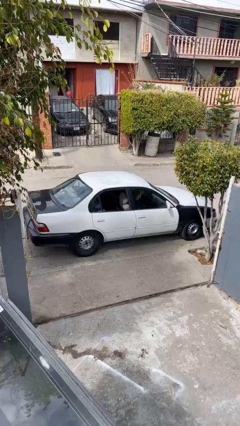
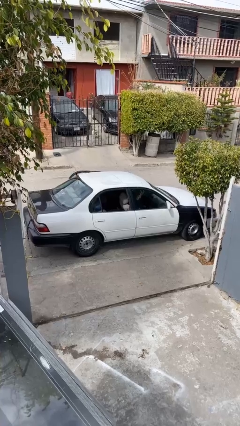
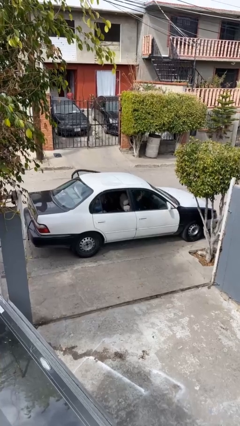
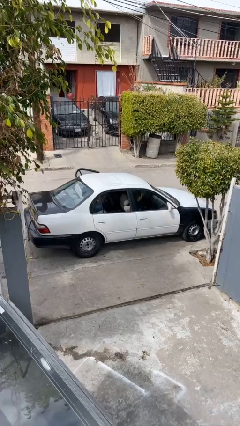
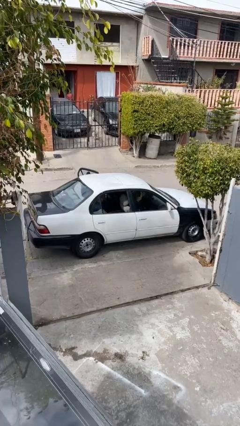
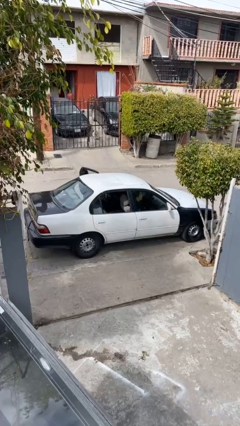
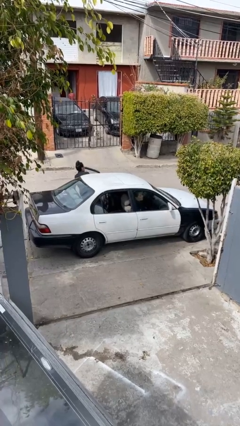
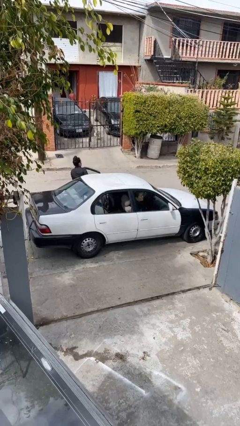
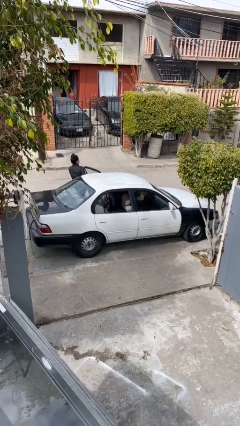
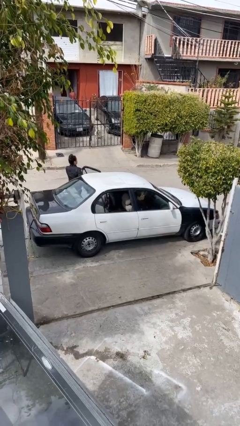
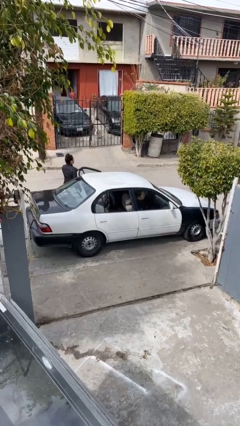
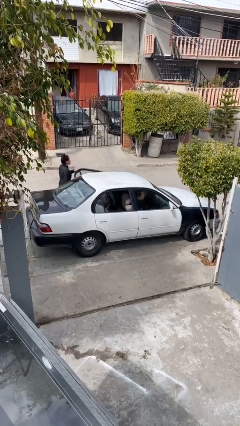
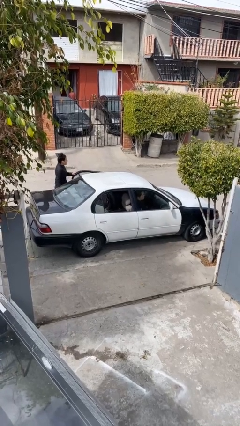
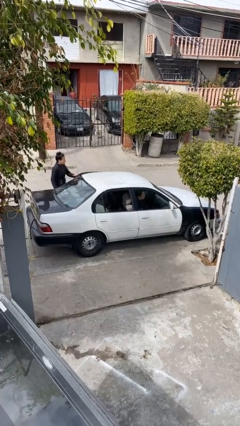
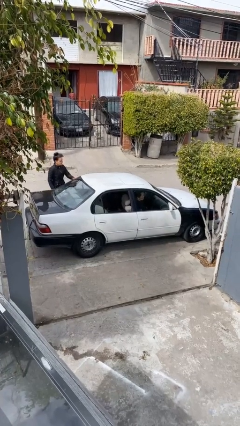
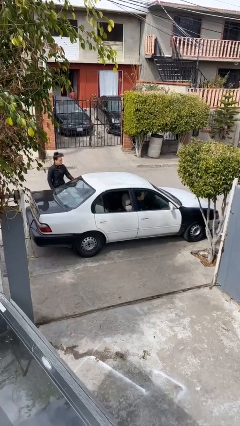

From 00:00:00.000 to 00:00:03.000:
car drops off person

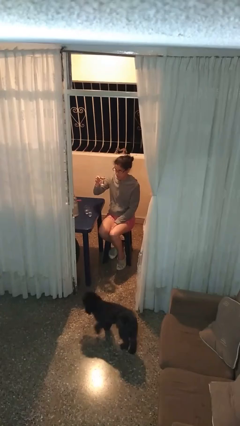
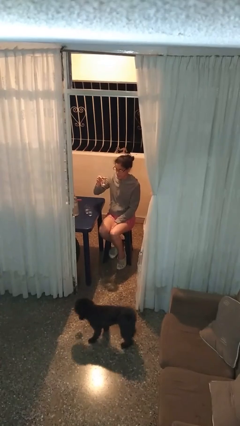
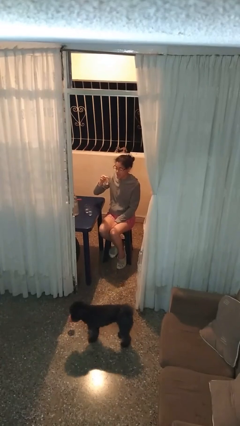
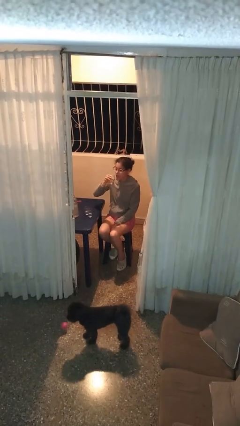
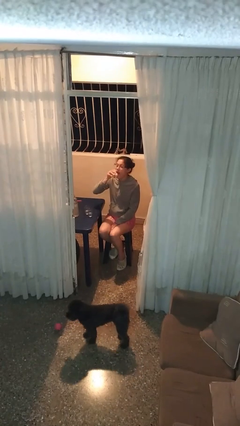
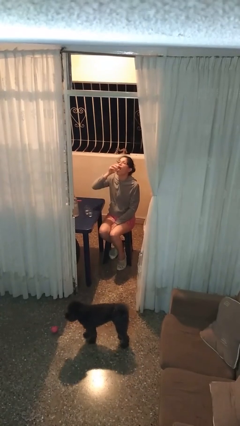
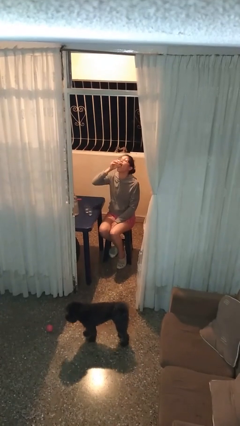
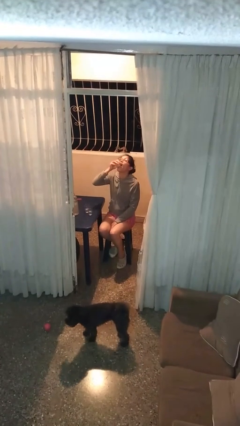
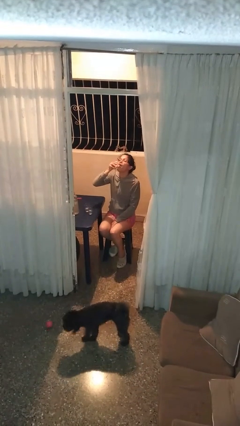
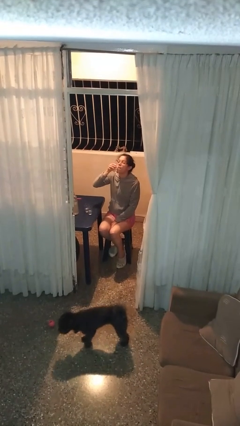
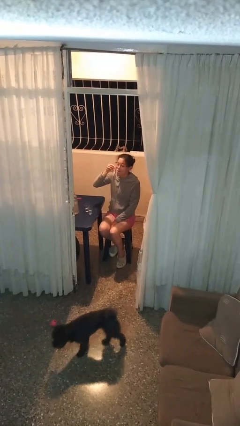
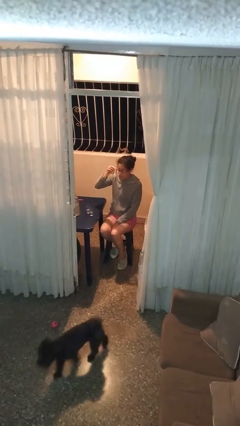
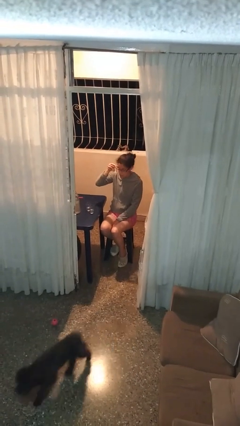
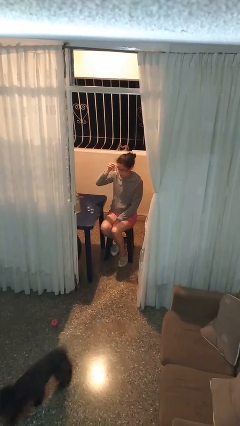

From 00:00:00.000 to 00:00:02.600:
person drinks from shotglass

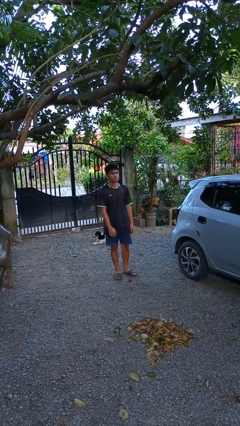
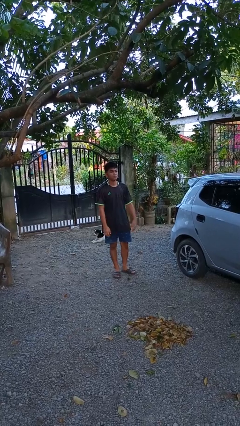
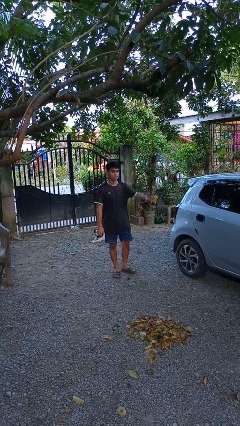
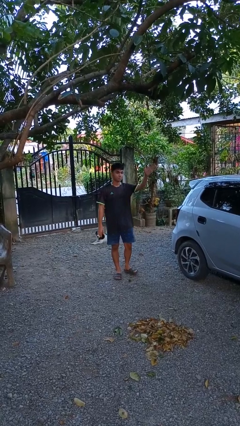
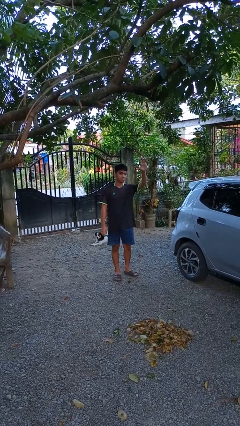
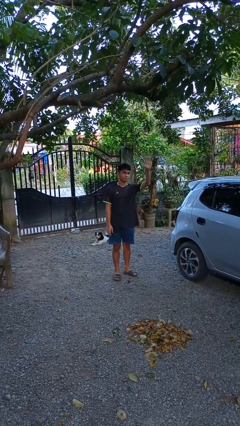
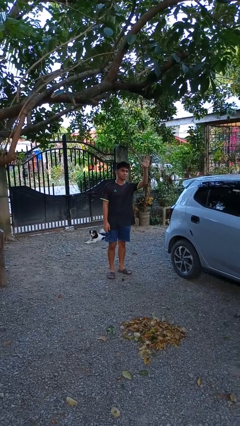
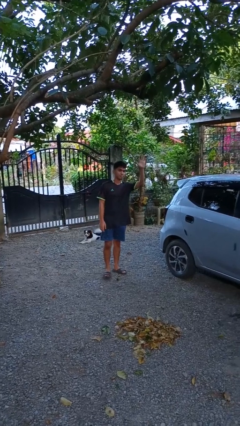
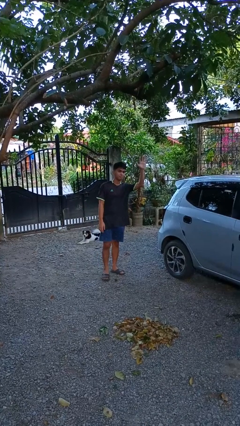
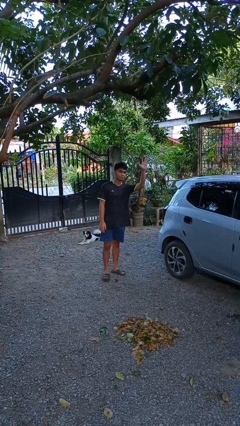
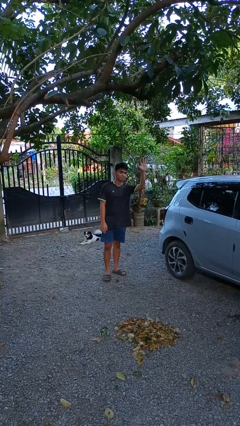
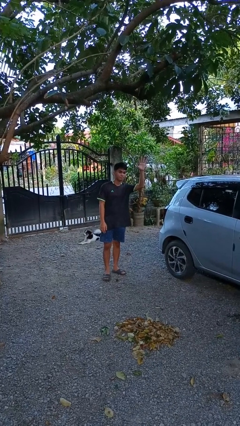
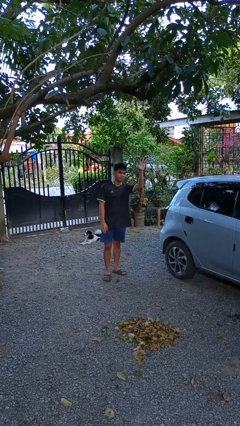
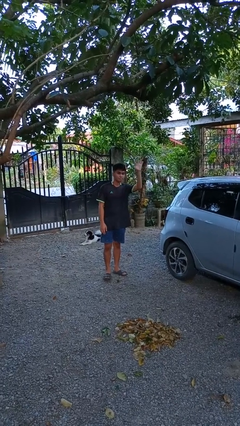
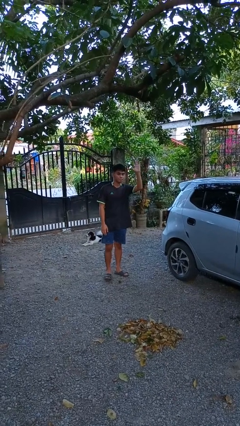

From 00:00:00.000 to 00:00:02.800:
person waves at person

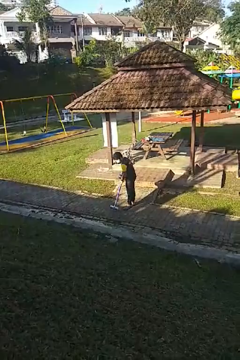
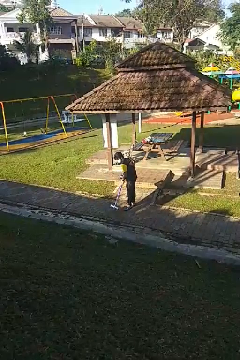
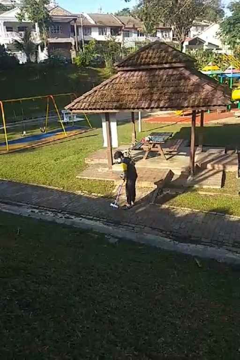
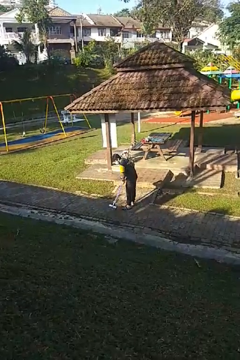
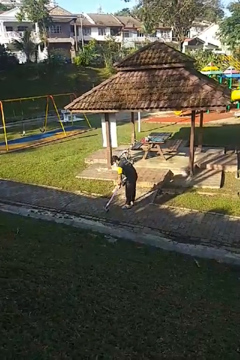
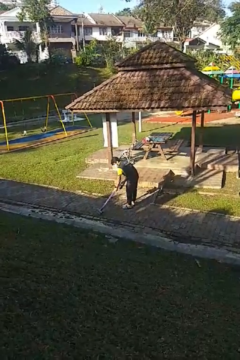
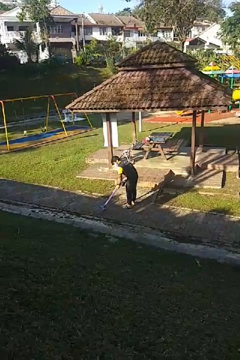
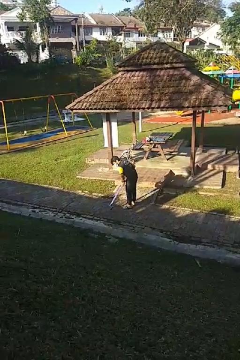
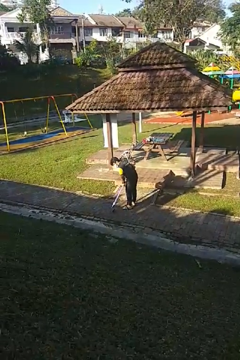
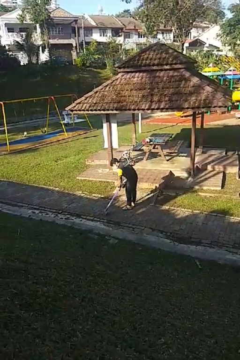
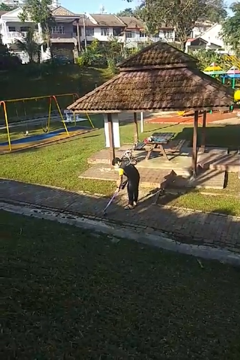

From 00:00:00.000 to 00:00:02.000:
person vacuums carpet

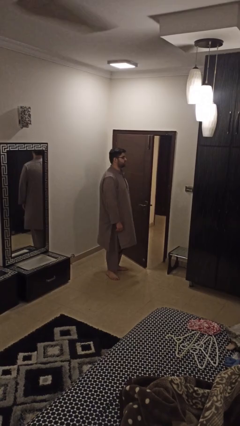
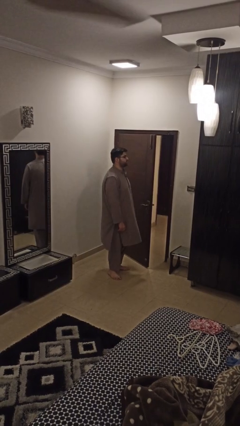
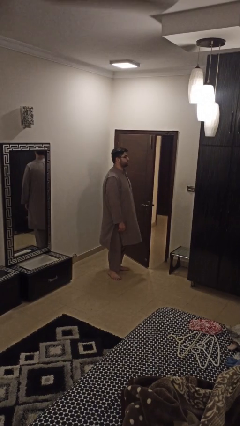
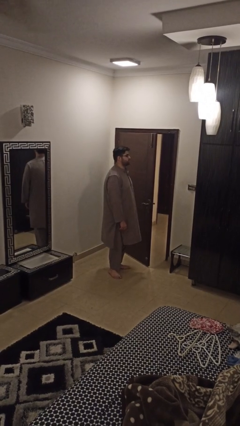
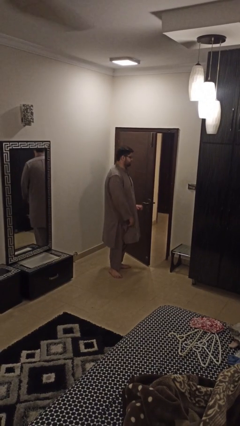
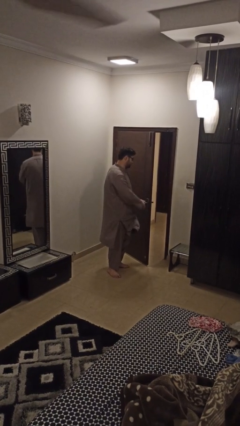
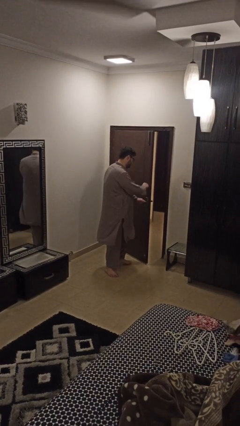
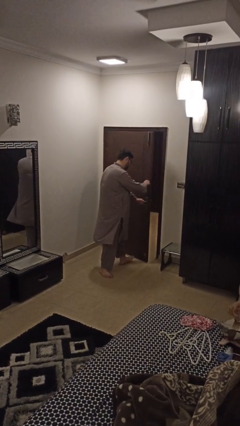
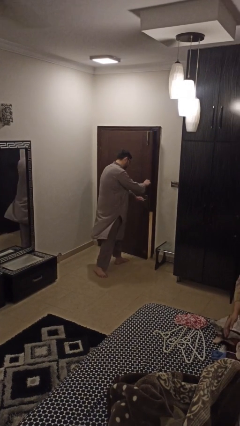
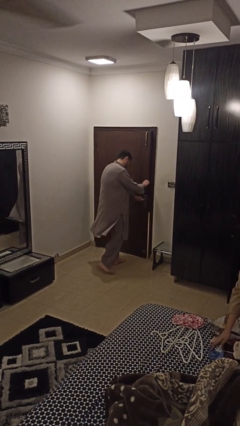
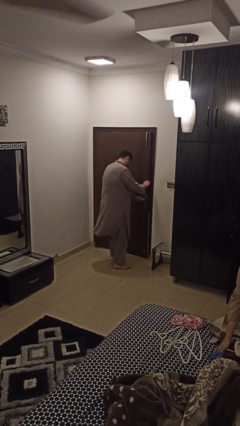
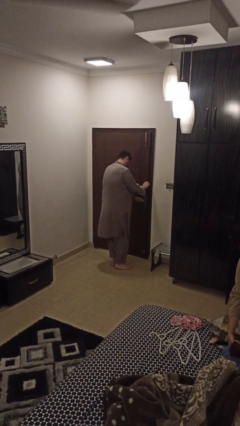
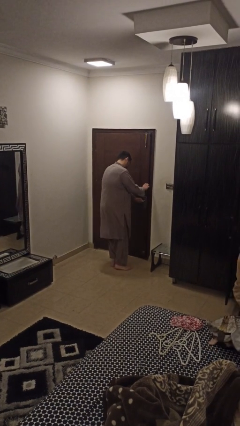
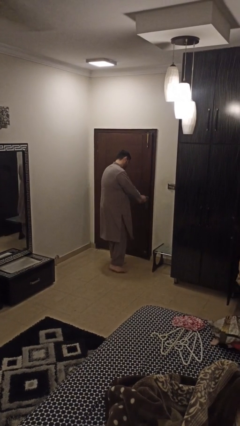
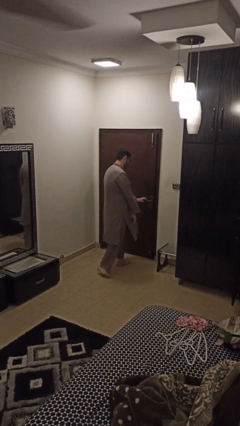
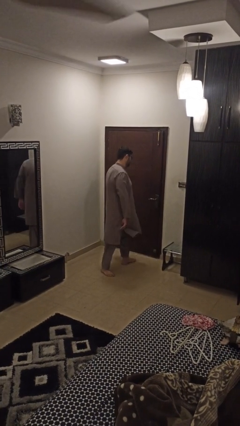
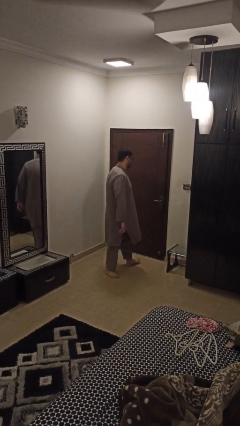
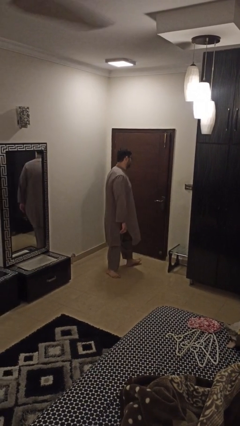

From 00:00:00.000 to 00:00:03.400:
person closes facility door

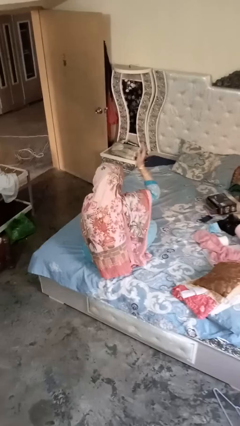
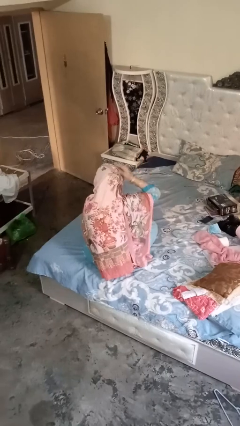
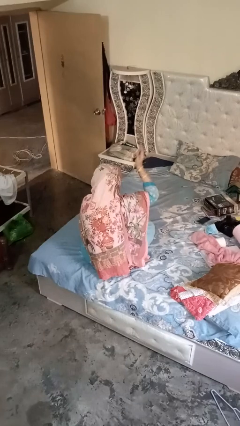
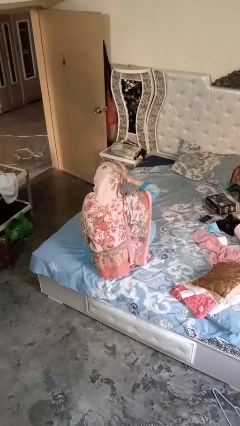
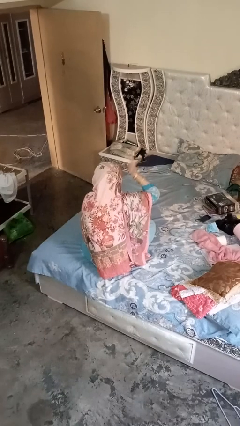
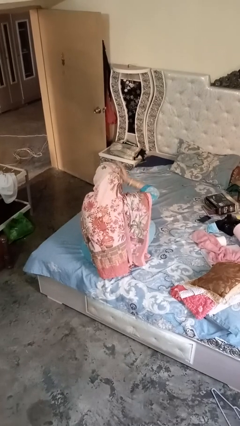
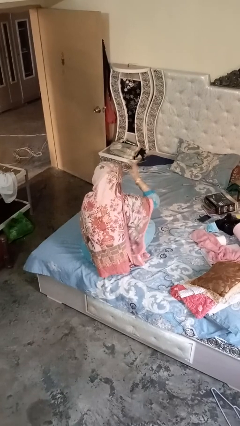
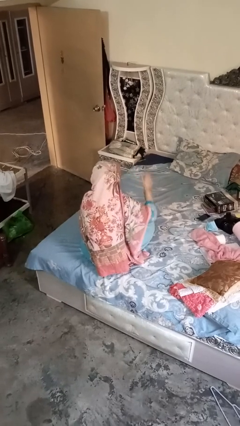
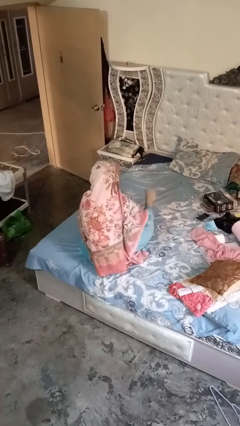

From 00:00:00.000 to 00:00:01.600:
person pats head

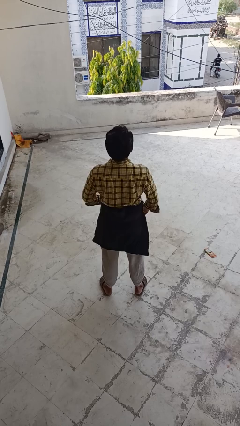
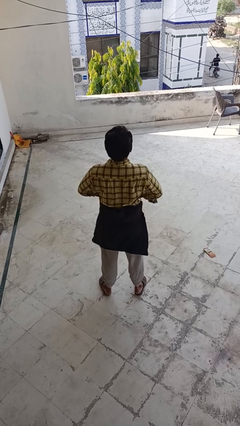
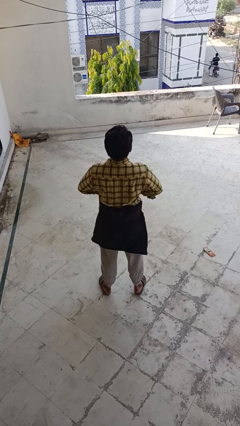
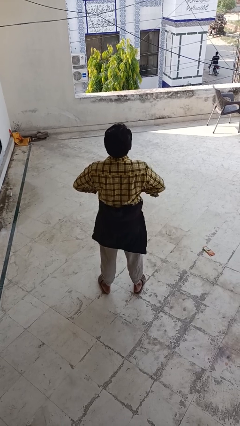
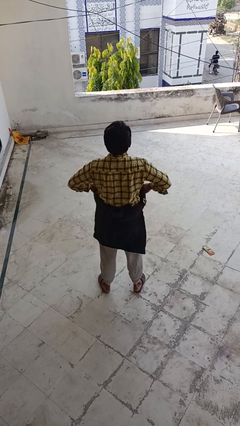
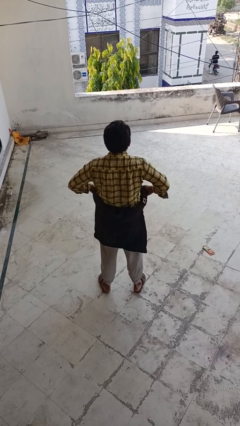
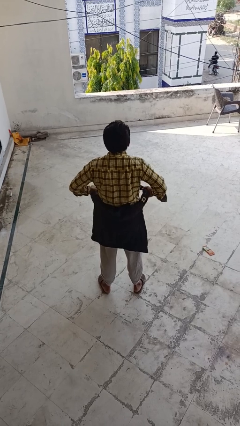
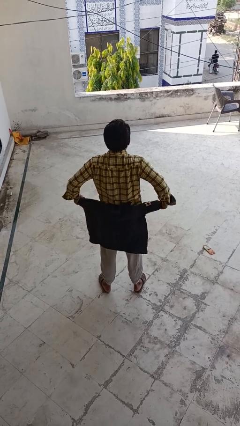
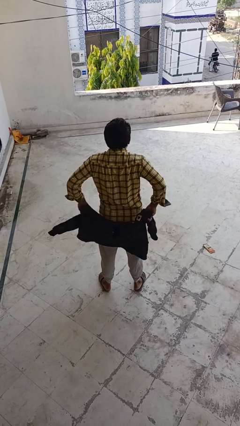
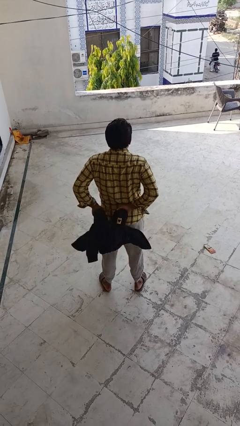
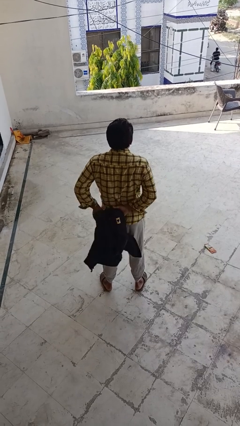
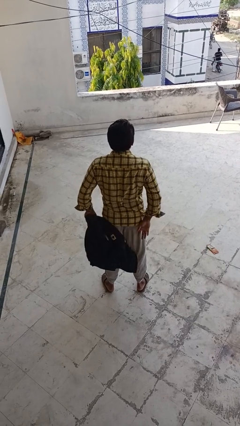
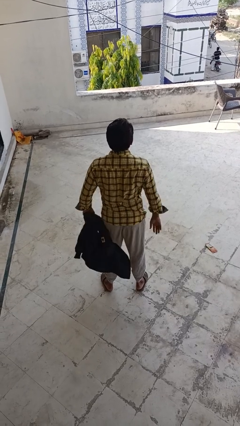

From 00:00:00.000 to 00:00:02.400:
person unties jacket around waist
